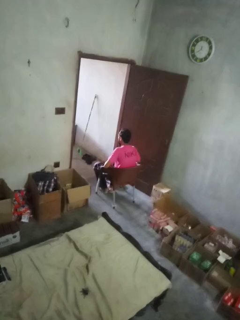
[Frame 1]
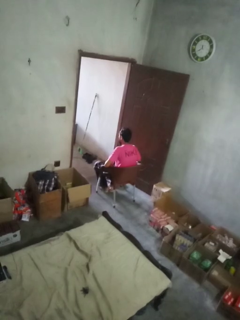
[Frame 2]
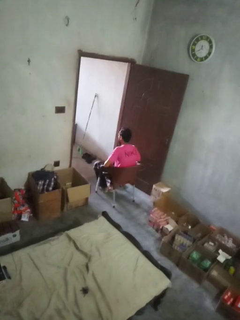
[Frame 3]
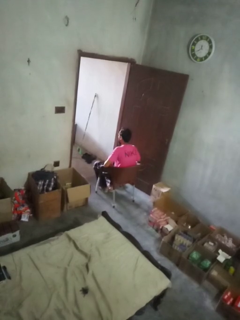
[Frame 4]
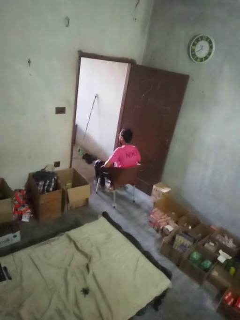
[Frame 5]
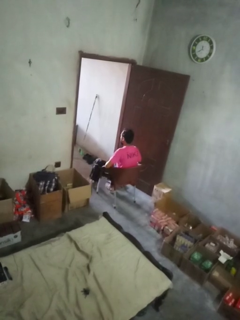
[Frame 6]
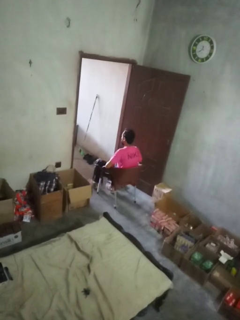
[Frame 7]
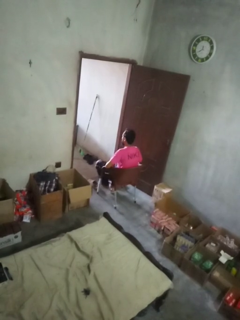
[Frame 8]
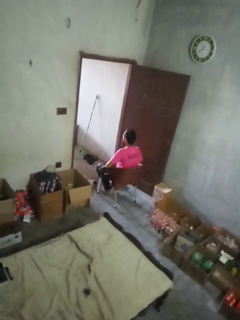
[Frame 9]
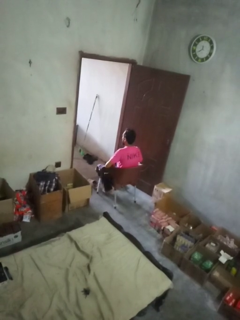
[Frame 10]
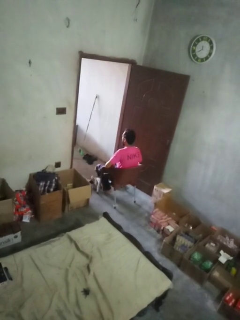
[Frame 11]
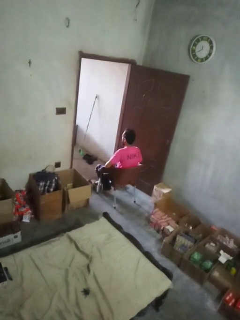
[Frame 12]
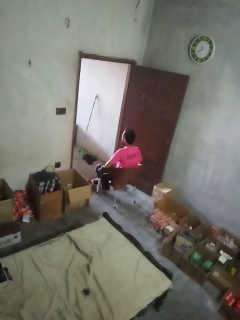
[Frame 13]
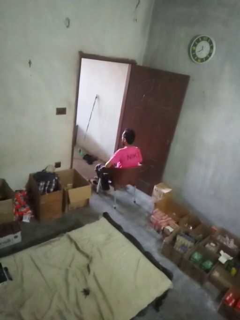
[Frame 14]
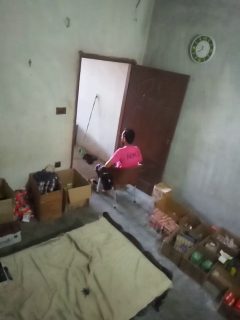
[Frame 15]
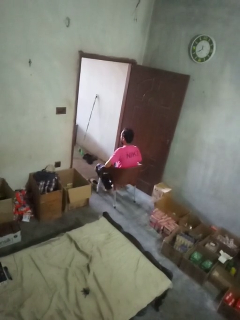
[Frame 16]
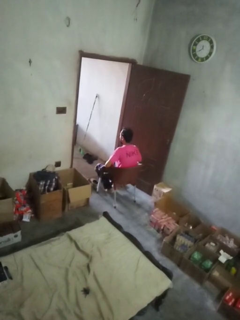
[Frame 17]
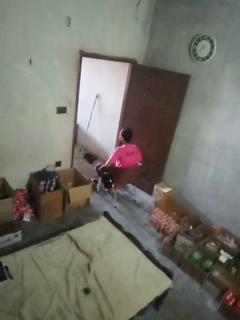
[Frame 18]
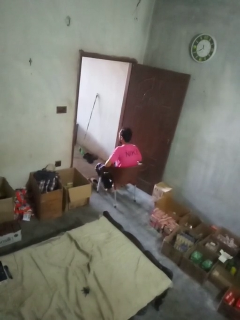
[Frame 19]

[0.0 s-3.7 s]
person takes off shoes

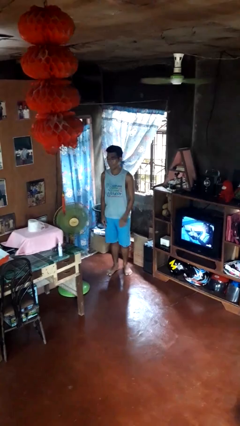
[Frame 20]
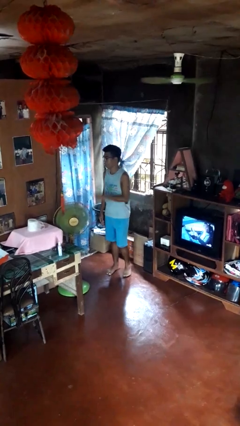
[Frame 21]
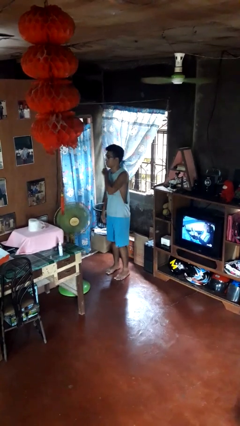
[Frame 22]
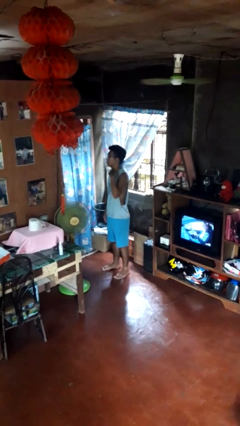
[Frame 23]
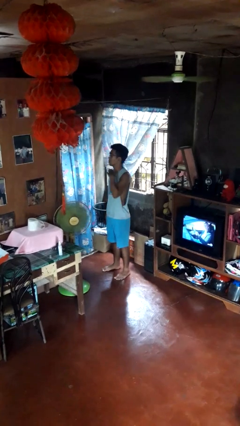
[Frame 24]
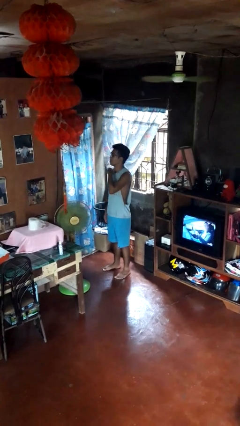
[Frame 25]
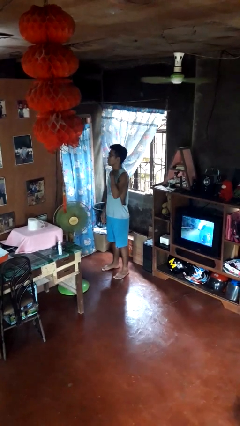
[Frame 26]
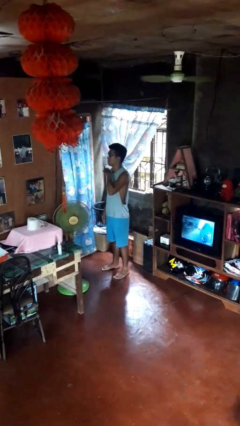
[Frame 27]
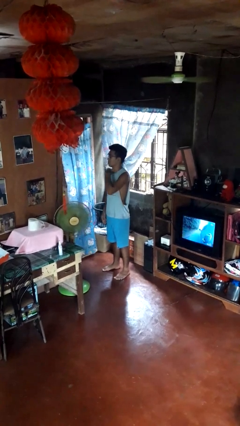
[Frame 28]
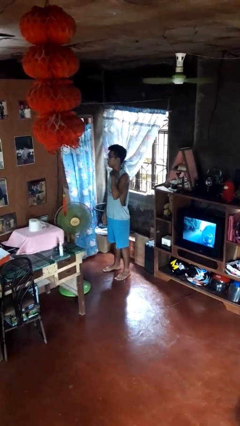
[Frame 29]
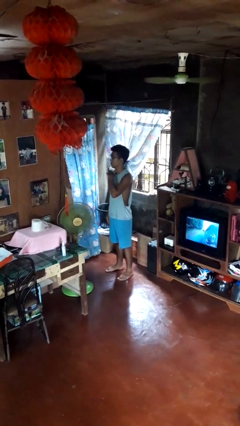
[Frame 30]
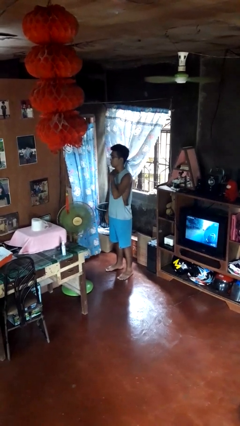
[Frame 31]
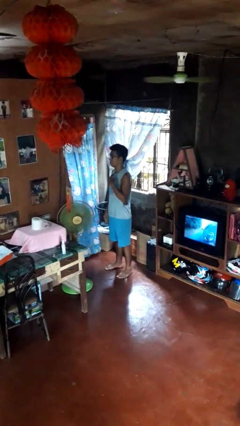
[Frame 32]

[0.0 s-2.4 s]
person gestures cut

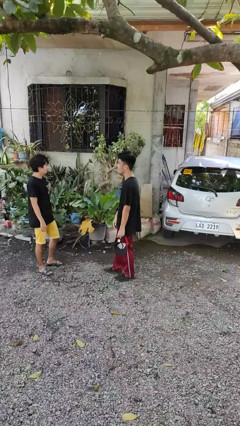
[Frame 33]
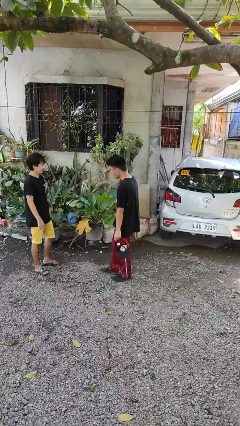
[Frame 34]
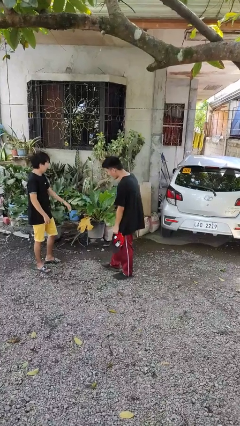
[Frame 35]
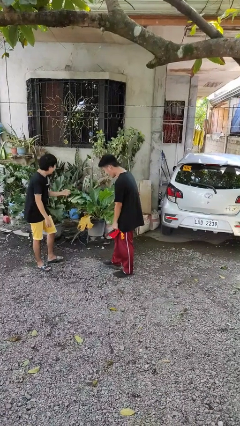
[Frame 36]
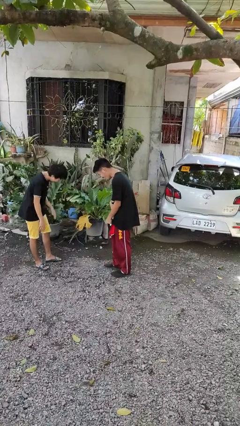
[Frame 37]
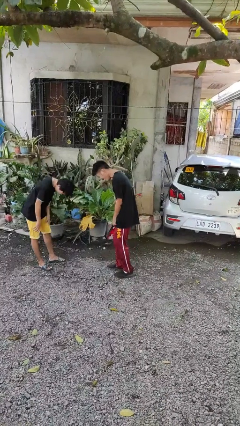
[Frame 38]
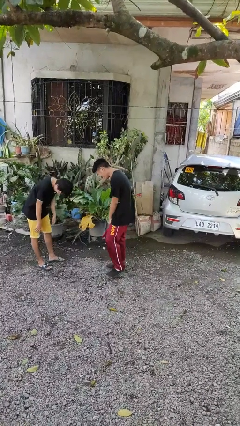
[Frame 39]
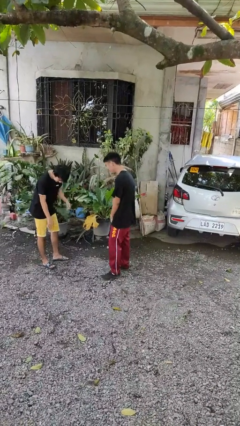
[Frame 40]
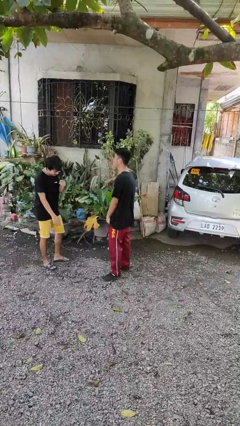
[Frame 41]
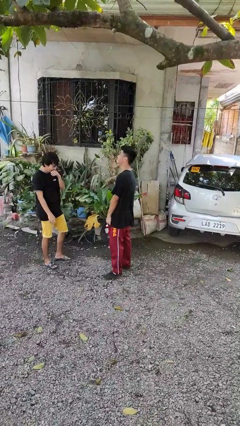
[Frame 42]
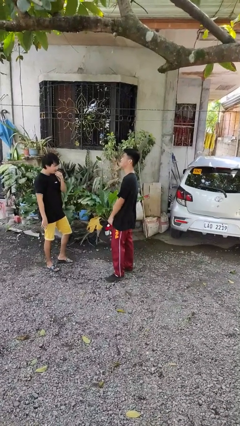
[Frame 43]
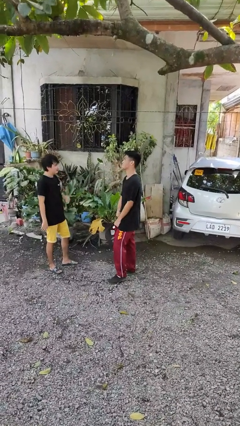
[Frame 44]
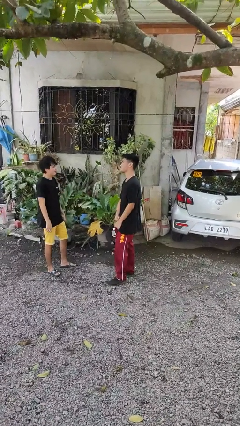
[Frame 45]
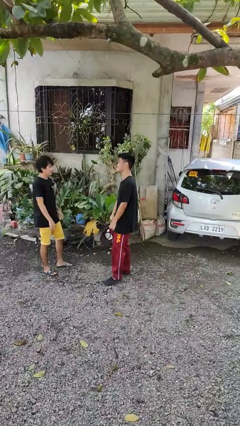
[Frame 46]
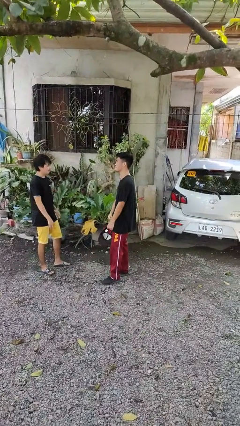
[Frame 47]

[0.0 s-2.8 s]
person laughs with person

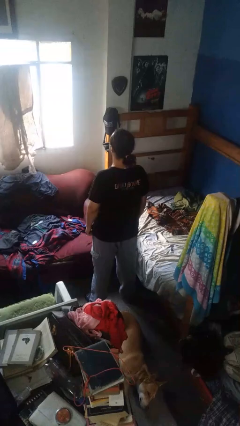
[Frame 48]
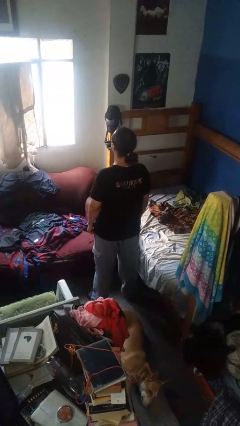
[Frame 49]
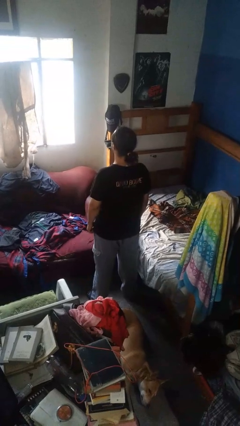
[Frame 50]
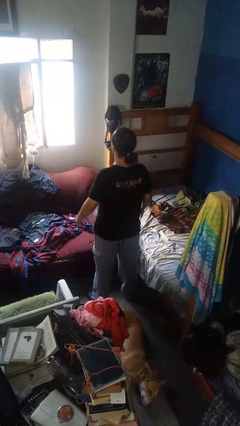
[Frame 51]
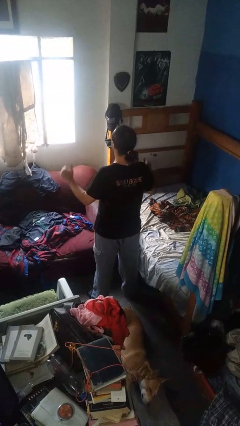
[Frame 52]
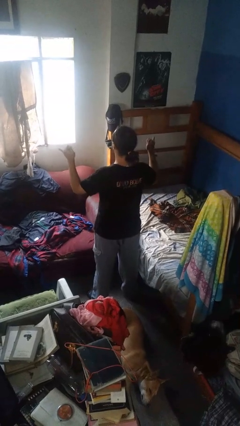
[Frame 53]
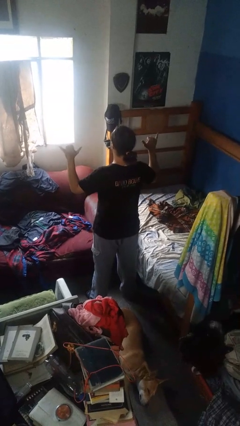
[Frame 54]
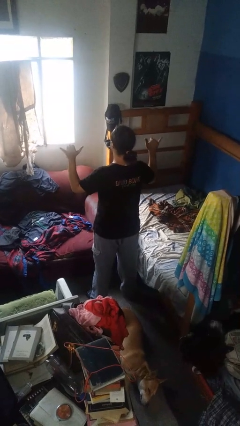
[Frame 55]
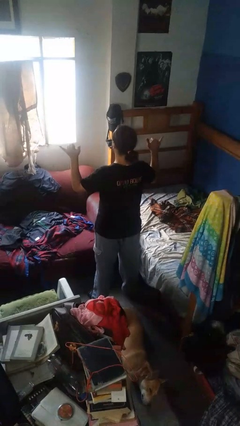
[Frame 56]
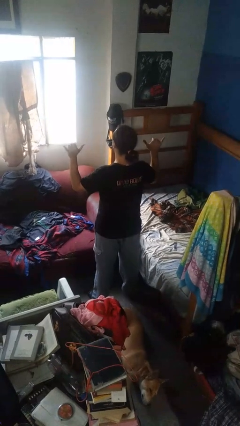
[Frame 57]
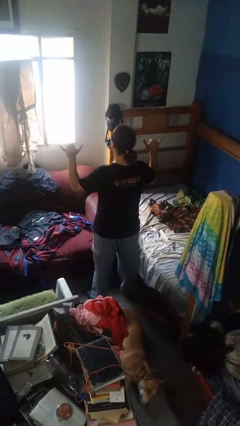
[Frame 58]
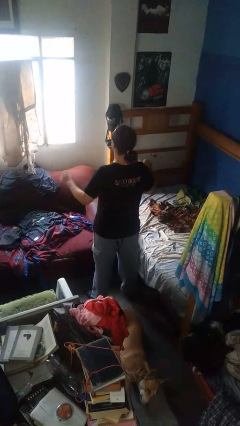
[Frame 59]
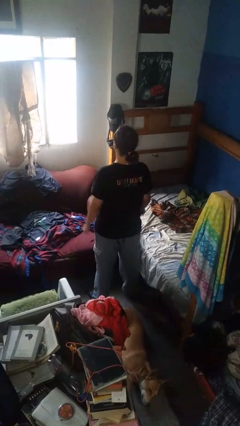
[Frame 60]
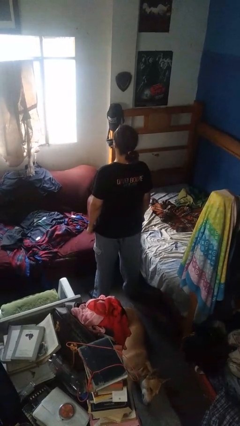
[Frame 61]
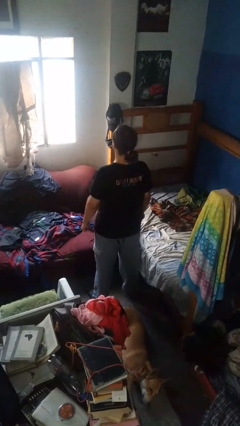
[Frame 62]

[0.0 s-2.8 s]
person gestures hang loose

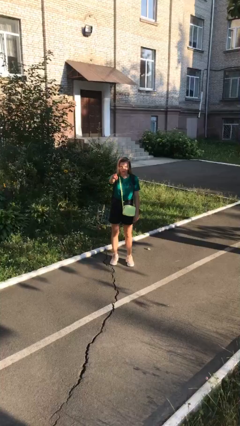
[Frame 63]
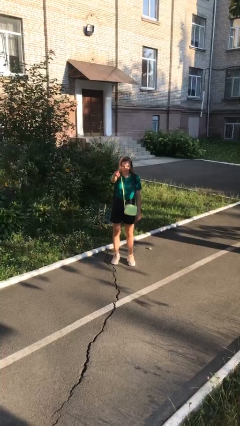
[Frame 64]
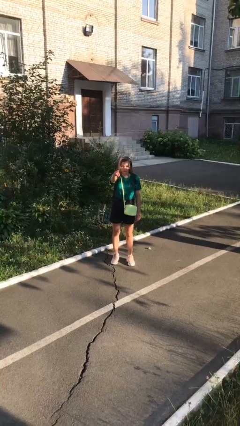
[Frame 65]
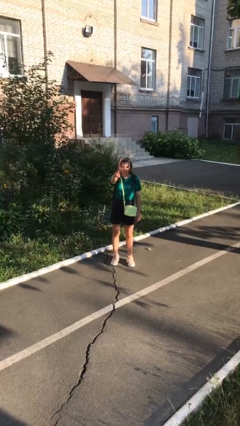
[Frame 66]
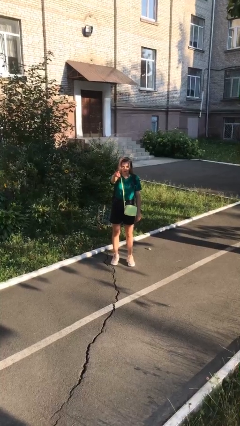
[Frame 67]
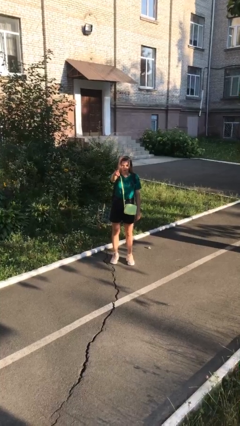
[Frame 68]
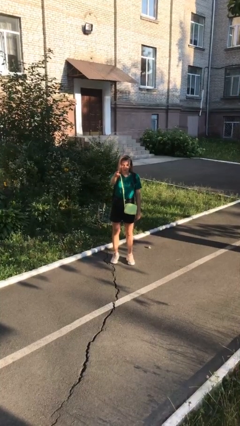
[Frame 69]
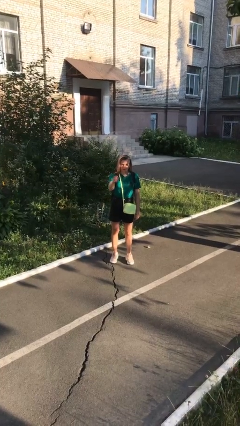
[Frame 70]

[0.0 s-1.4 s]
person points at person

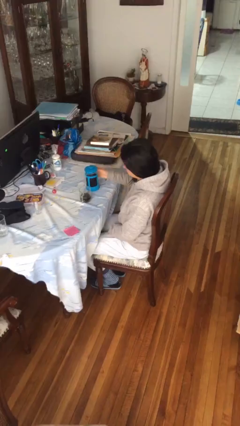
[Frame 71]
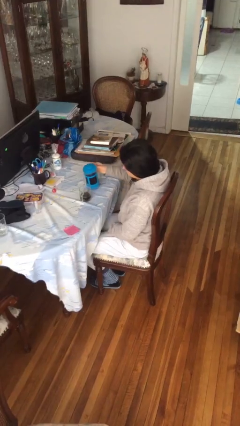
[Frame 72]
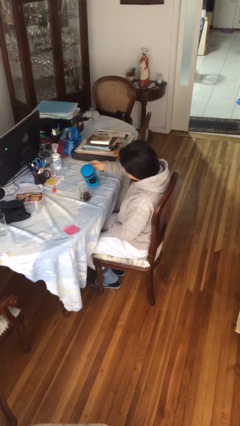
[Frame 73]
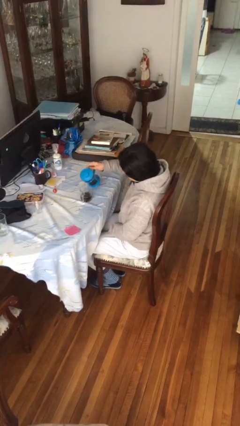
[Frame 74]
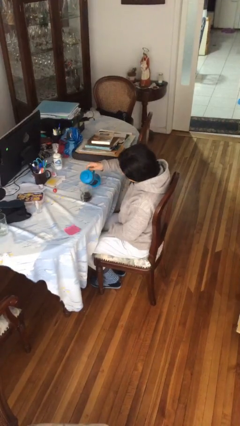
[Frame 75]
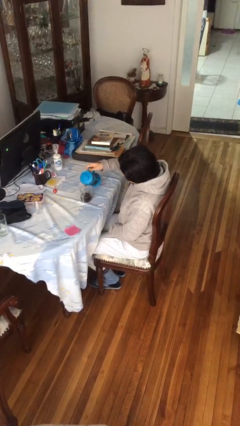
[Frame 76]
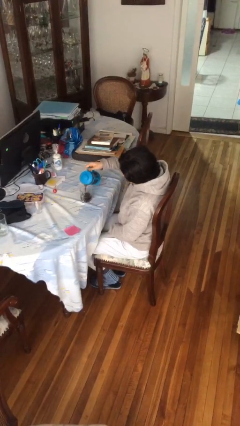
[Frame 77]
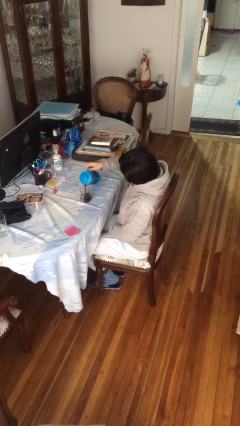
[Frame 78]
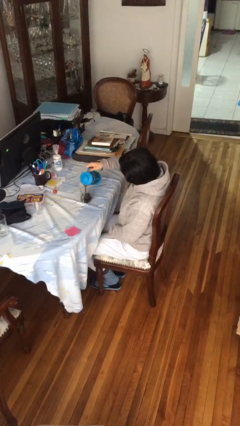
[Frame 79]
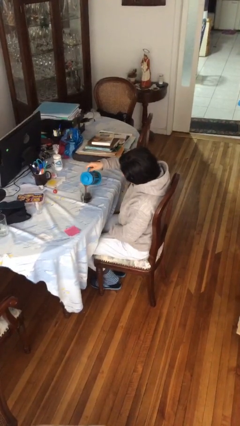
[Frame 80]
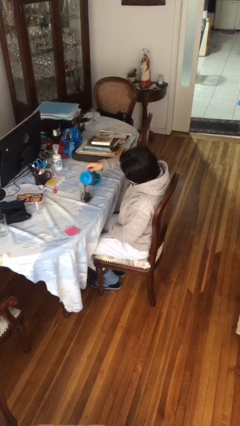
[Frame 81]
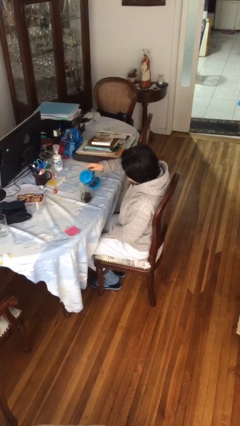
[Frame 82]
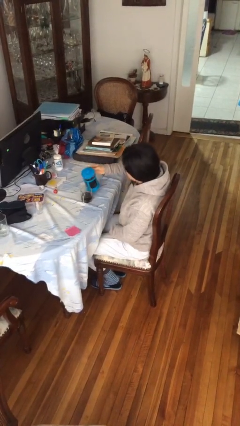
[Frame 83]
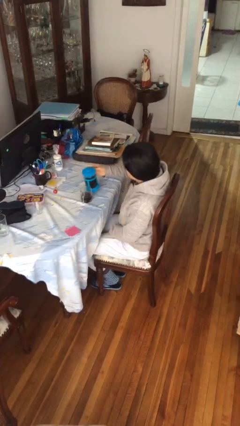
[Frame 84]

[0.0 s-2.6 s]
person pours coffee into mug

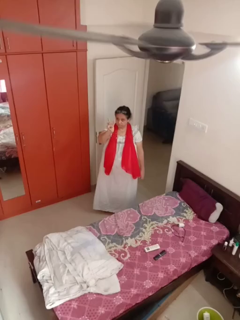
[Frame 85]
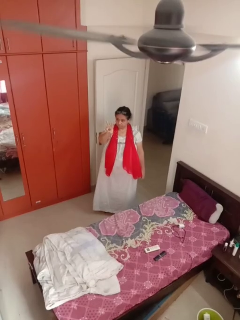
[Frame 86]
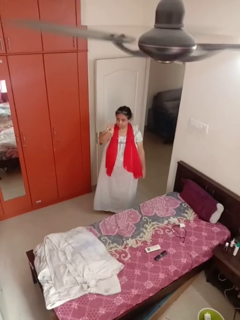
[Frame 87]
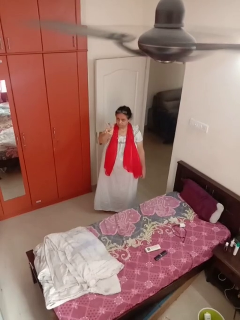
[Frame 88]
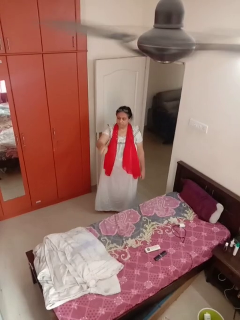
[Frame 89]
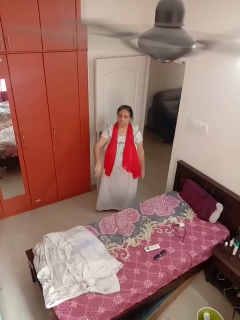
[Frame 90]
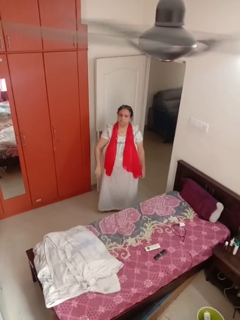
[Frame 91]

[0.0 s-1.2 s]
person gestures peace

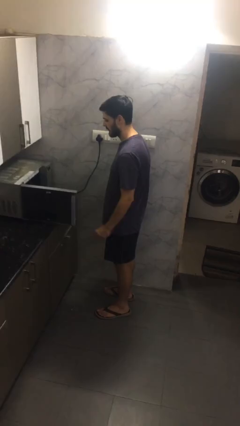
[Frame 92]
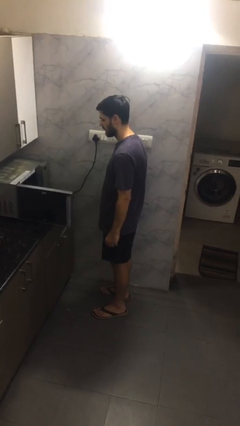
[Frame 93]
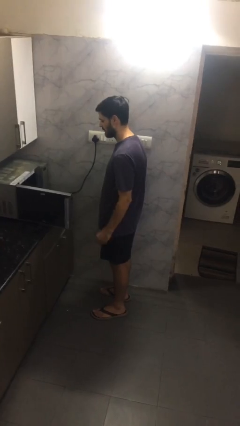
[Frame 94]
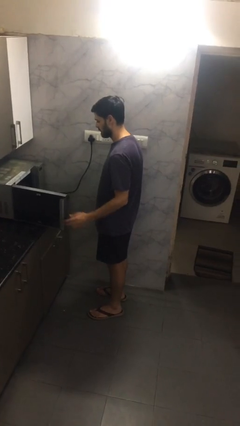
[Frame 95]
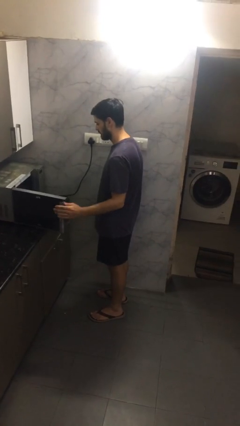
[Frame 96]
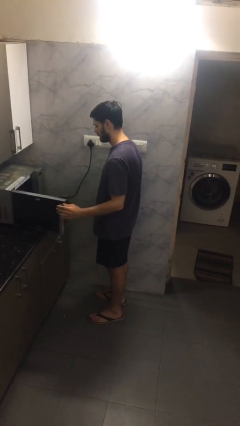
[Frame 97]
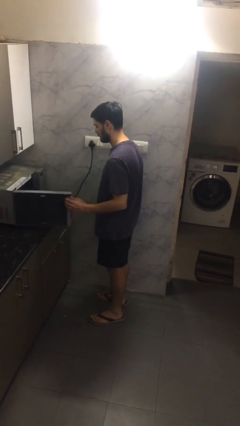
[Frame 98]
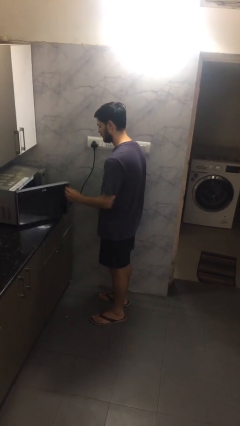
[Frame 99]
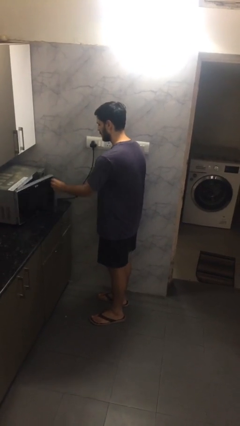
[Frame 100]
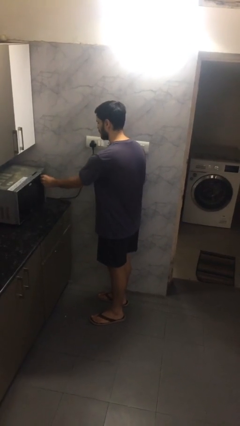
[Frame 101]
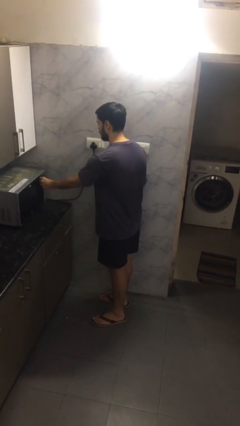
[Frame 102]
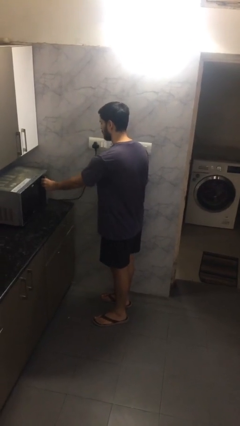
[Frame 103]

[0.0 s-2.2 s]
person closes microwave
